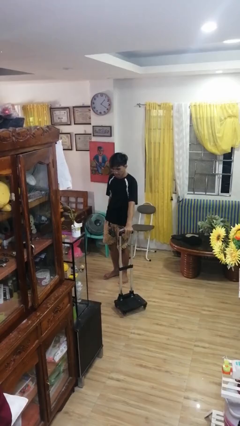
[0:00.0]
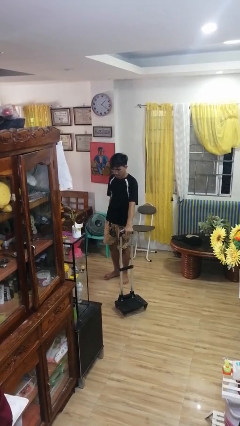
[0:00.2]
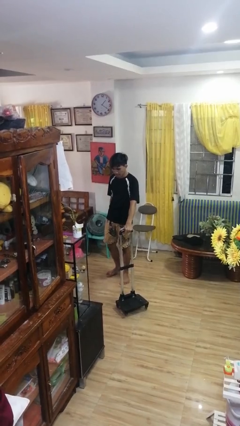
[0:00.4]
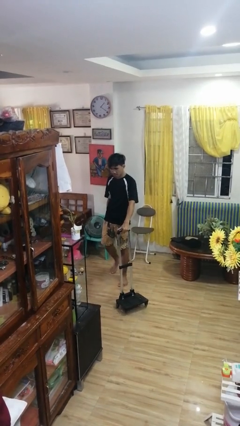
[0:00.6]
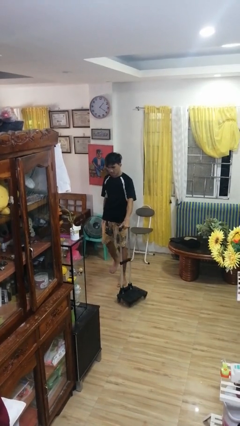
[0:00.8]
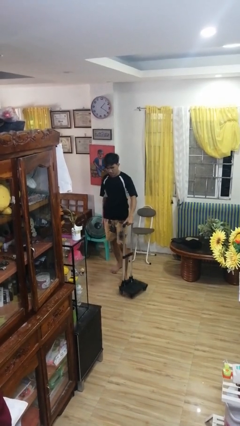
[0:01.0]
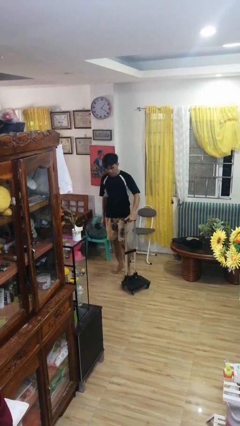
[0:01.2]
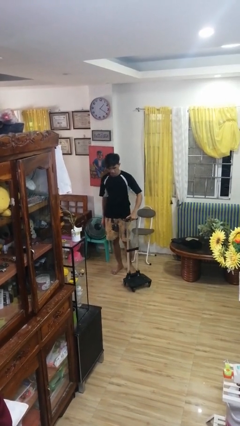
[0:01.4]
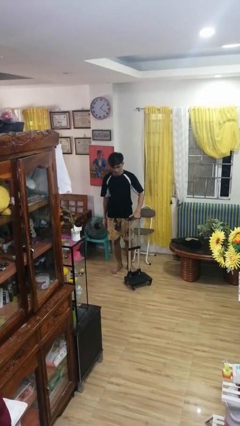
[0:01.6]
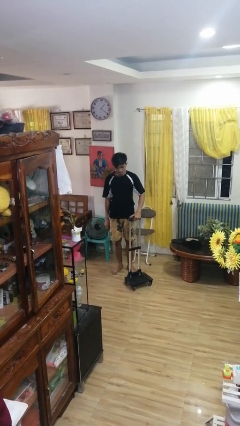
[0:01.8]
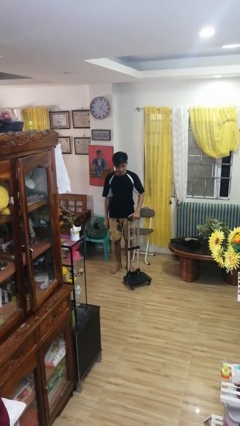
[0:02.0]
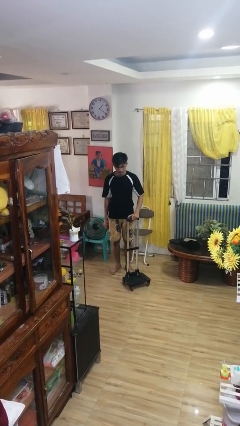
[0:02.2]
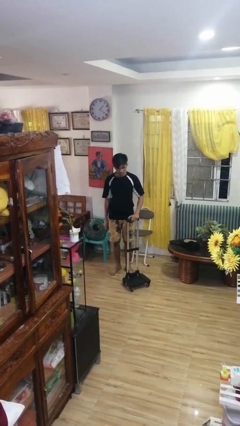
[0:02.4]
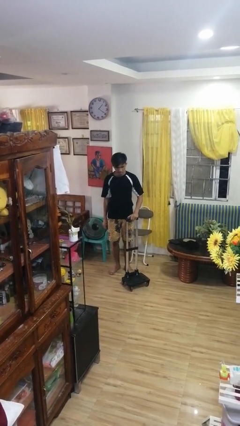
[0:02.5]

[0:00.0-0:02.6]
person pulls wheeled cart

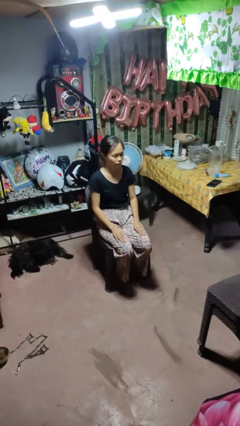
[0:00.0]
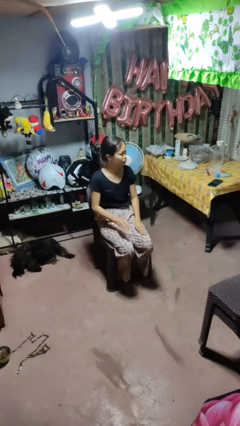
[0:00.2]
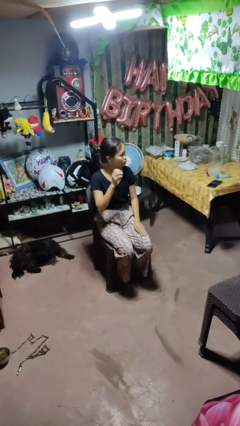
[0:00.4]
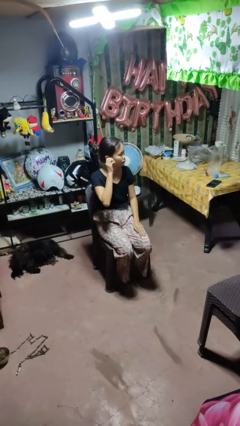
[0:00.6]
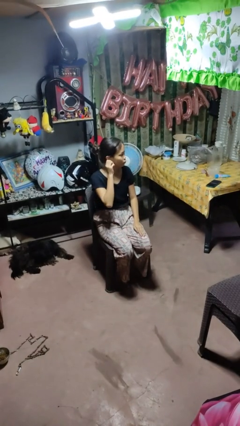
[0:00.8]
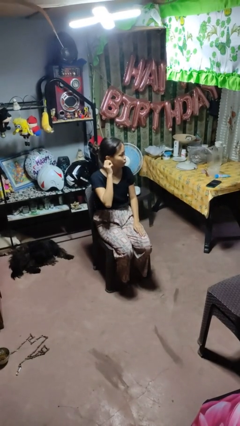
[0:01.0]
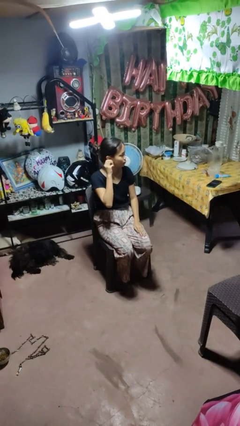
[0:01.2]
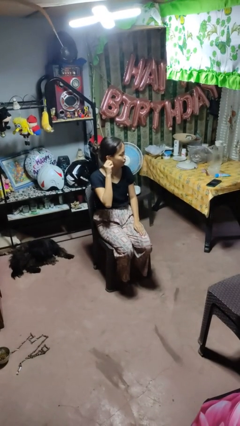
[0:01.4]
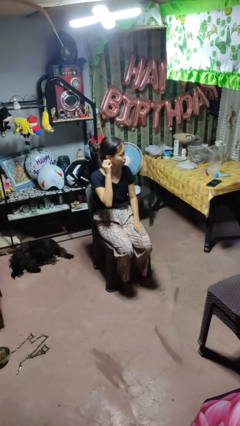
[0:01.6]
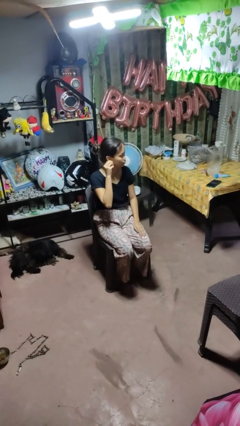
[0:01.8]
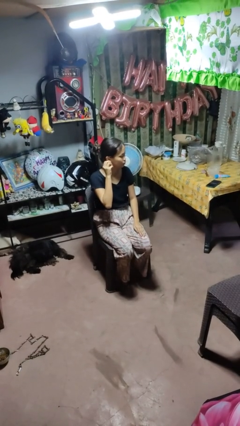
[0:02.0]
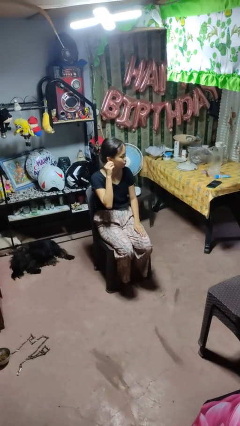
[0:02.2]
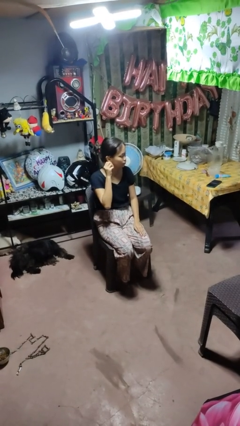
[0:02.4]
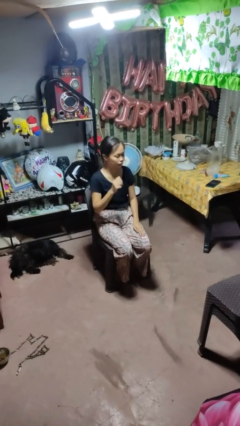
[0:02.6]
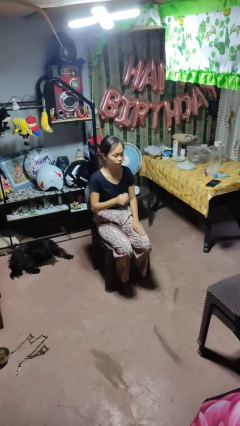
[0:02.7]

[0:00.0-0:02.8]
person touches earlobe

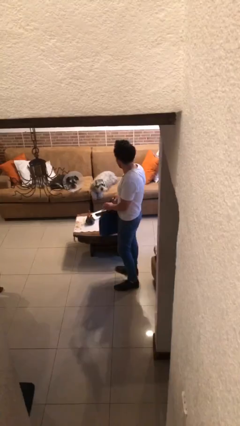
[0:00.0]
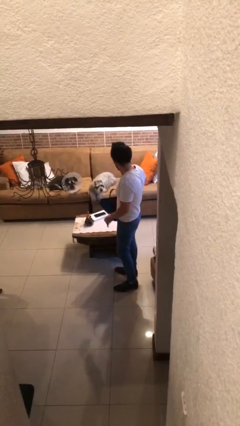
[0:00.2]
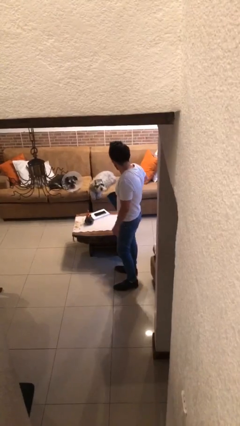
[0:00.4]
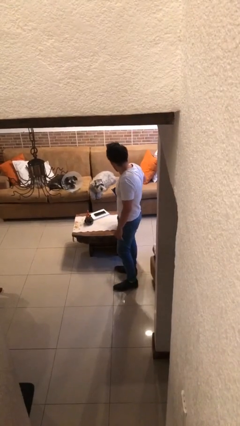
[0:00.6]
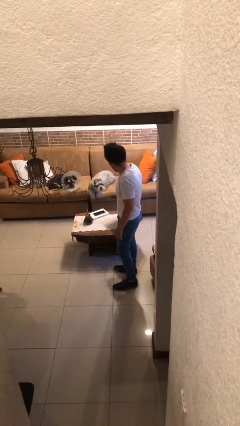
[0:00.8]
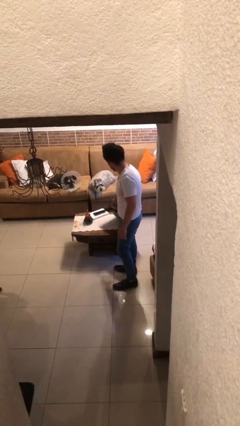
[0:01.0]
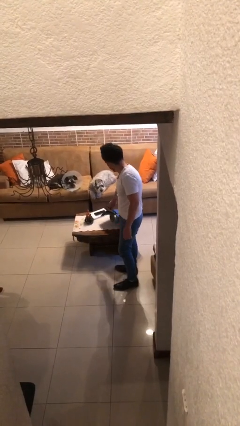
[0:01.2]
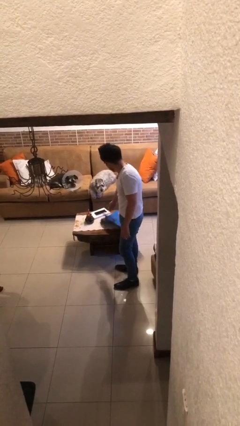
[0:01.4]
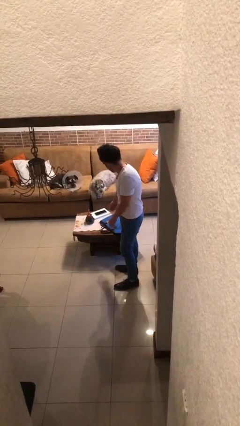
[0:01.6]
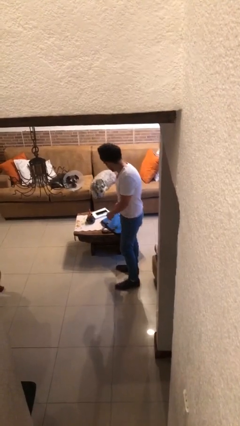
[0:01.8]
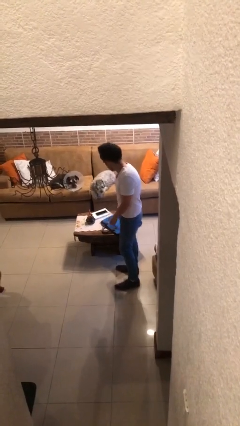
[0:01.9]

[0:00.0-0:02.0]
person puts down object on table

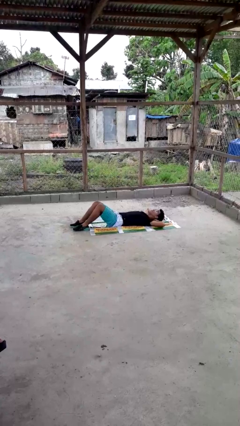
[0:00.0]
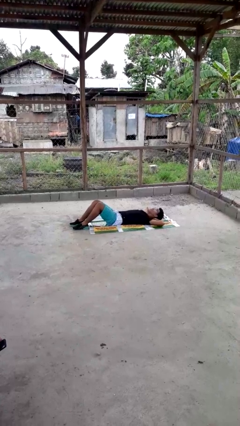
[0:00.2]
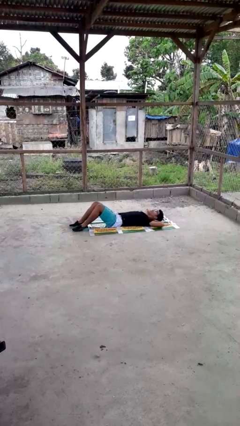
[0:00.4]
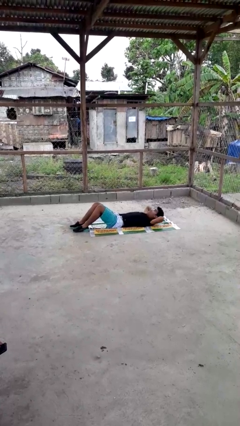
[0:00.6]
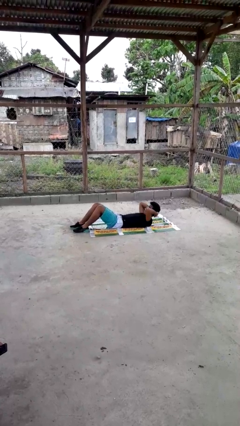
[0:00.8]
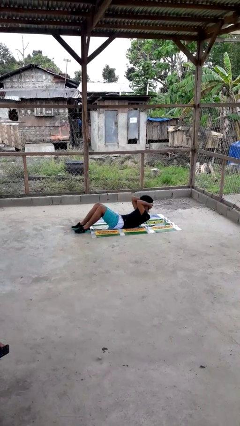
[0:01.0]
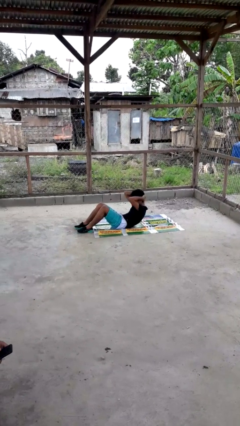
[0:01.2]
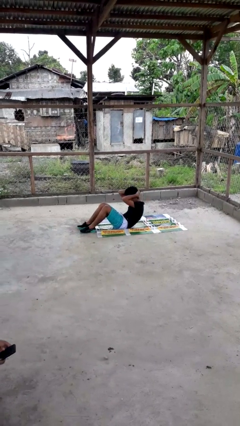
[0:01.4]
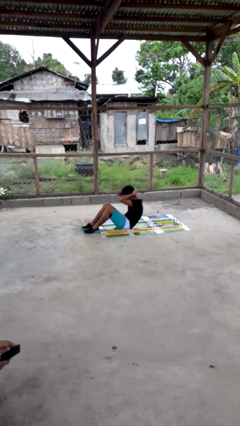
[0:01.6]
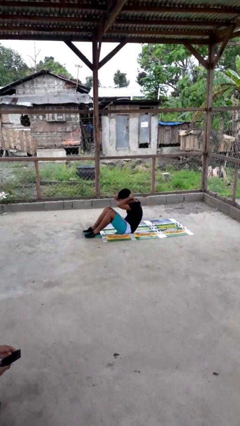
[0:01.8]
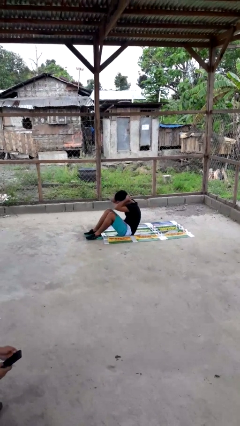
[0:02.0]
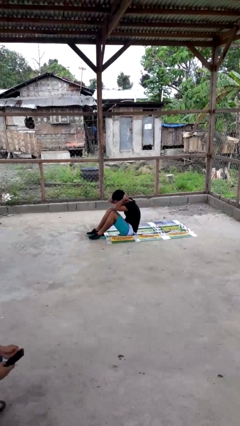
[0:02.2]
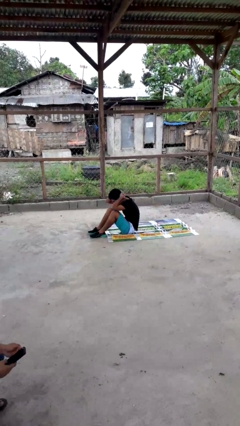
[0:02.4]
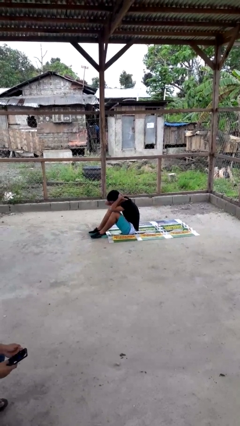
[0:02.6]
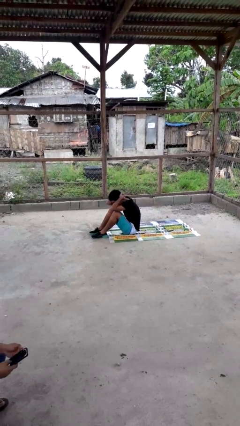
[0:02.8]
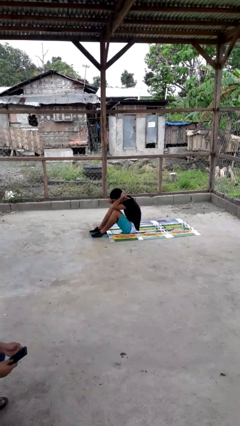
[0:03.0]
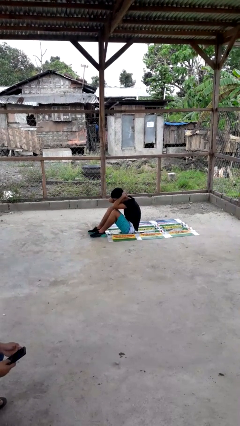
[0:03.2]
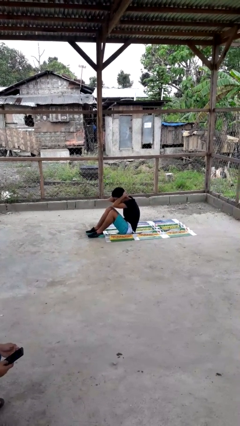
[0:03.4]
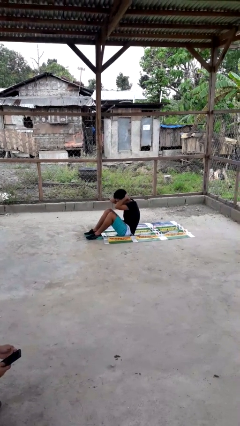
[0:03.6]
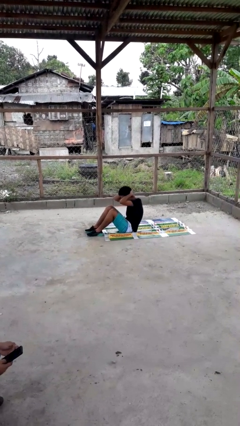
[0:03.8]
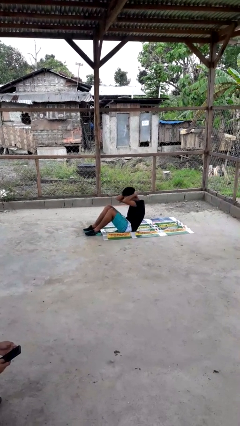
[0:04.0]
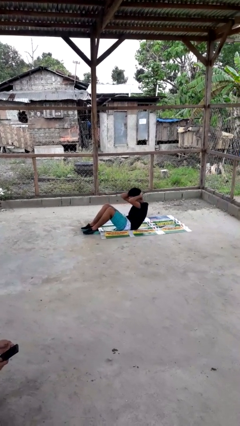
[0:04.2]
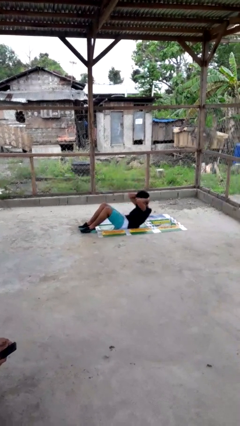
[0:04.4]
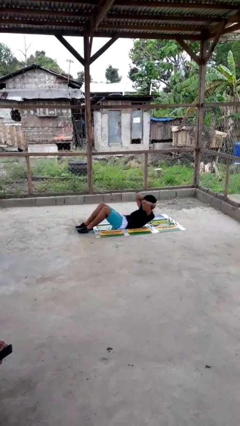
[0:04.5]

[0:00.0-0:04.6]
person exercises with situp

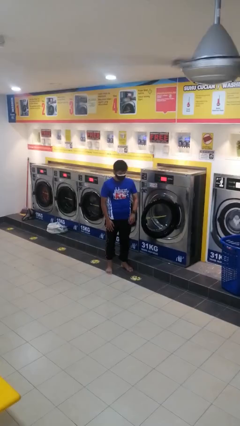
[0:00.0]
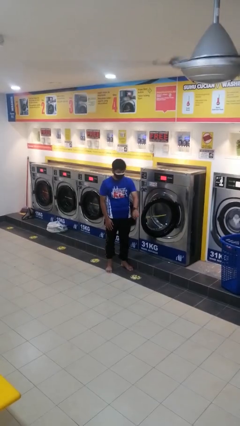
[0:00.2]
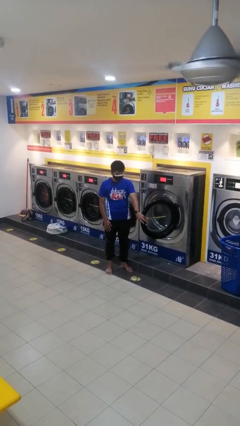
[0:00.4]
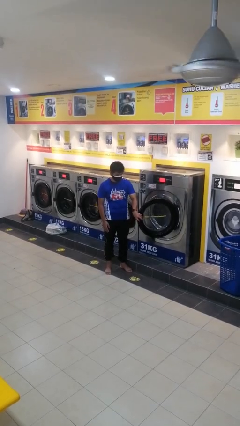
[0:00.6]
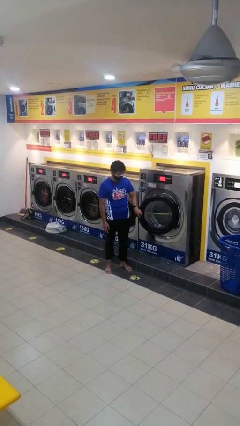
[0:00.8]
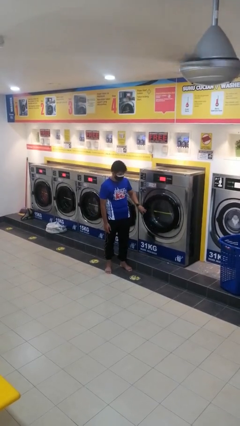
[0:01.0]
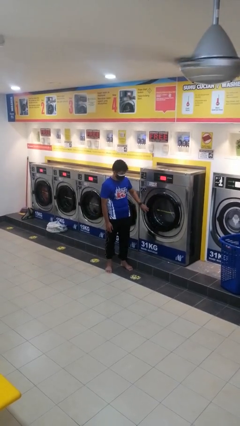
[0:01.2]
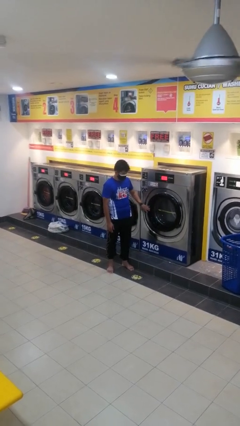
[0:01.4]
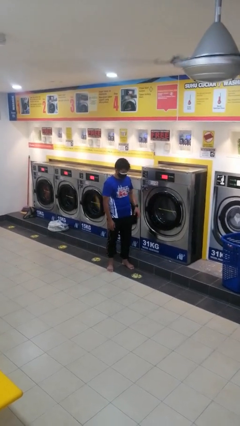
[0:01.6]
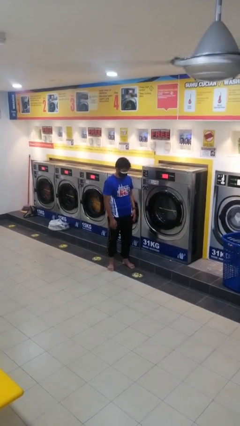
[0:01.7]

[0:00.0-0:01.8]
person closes clothes washer

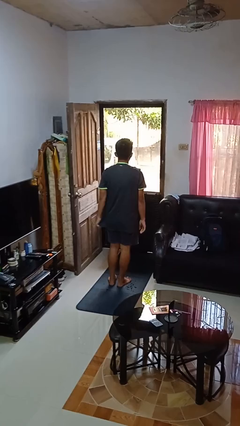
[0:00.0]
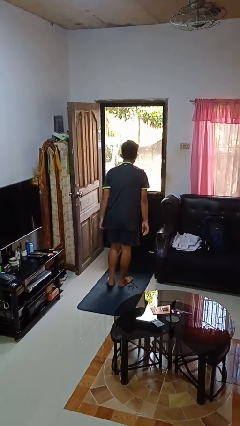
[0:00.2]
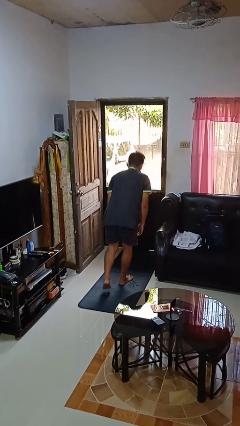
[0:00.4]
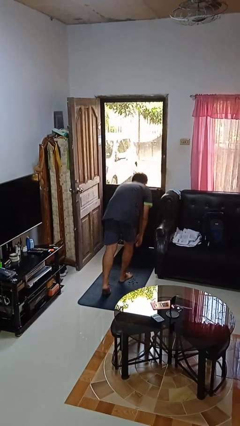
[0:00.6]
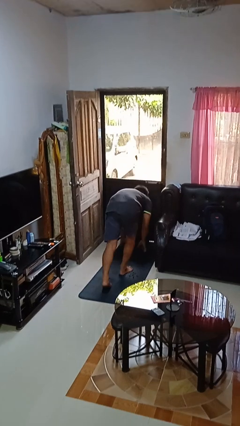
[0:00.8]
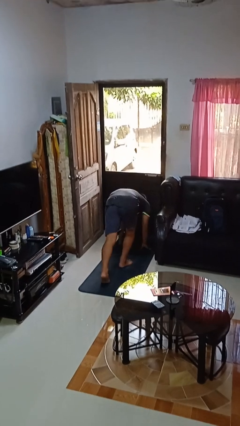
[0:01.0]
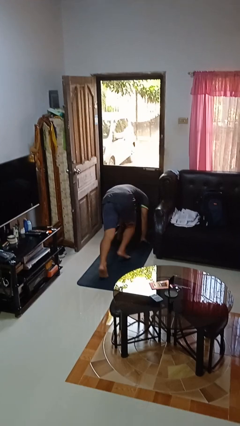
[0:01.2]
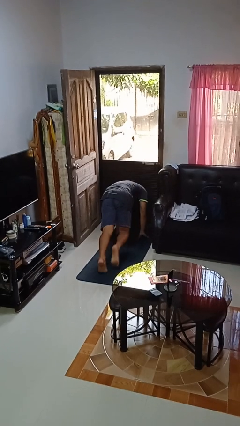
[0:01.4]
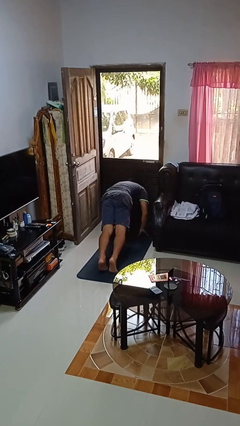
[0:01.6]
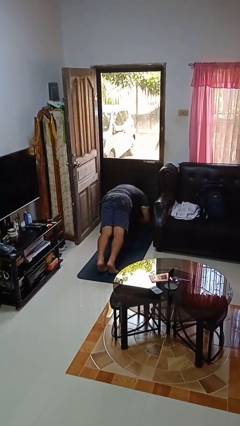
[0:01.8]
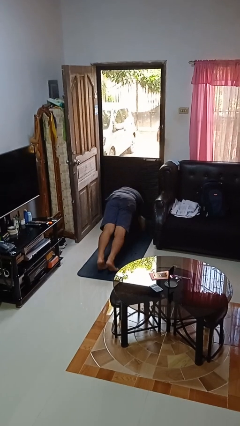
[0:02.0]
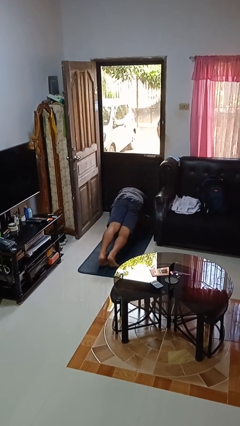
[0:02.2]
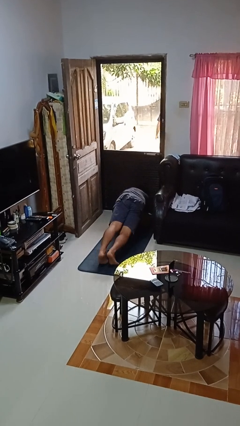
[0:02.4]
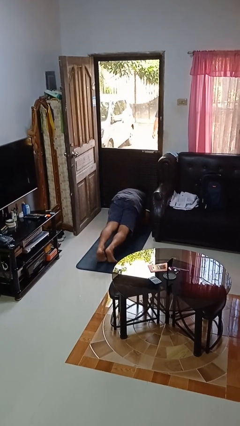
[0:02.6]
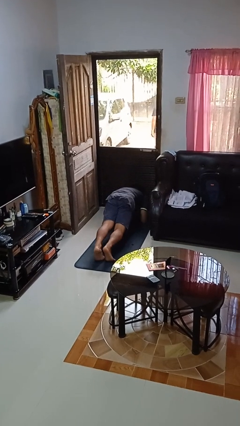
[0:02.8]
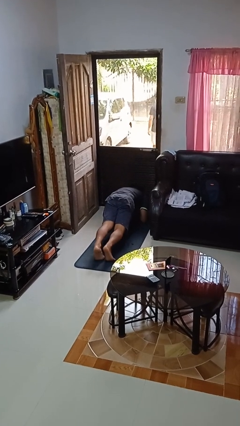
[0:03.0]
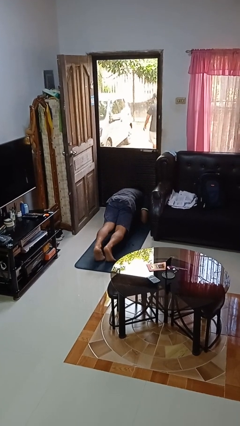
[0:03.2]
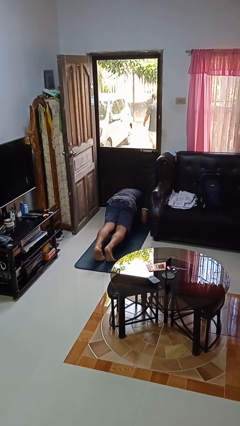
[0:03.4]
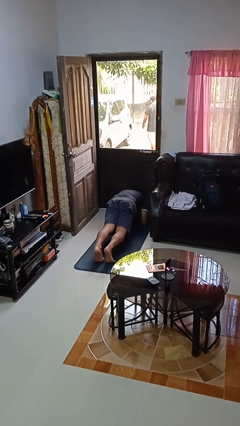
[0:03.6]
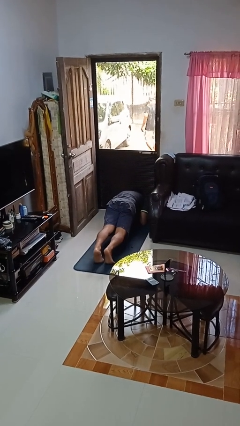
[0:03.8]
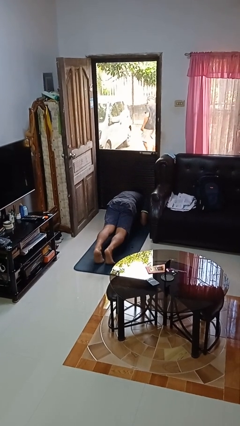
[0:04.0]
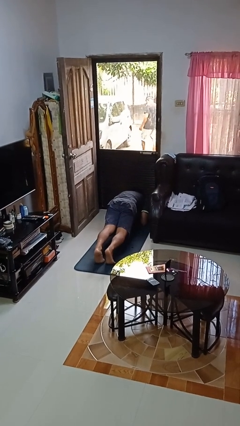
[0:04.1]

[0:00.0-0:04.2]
person exercises with plank
